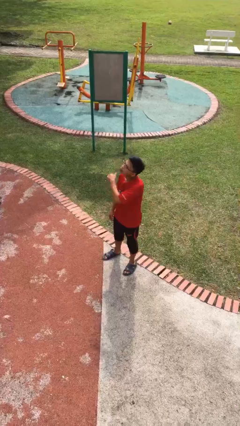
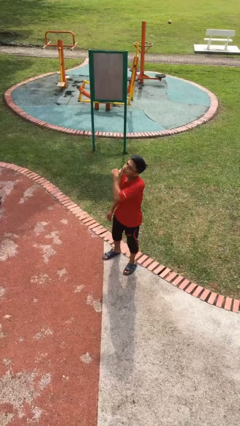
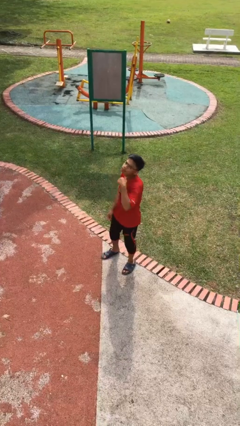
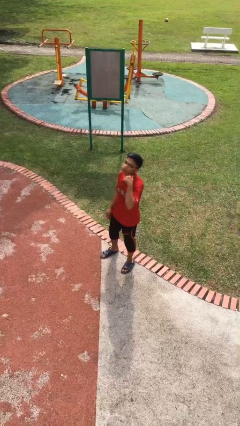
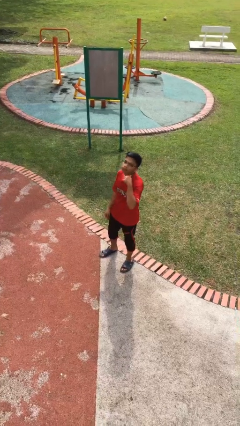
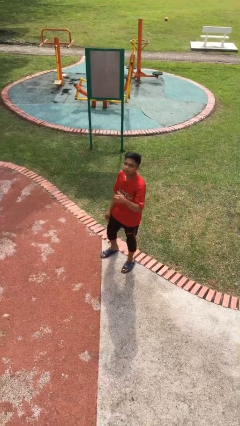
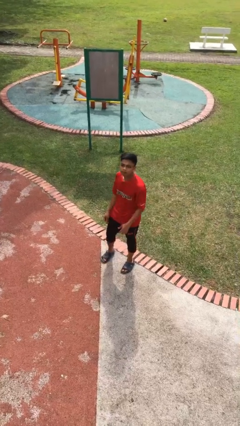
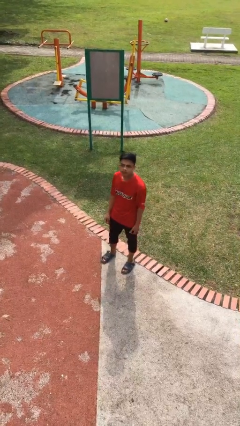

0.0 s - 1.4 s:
person gestures cut

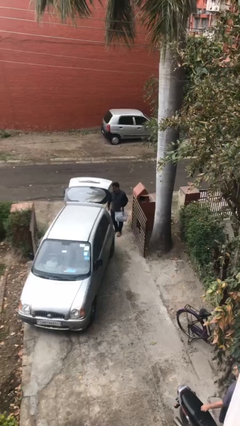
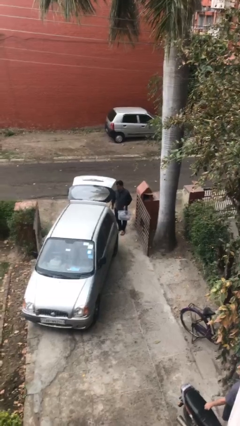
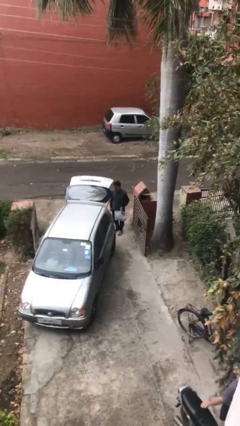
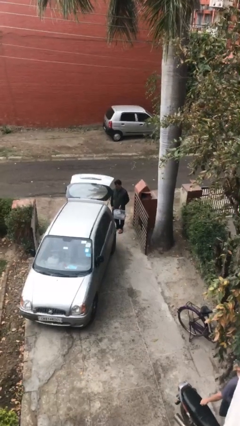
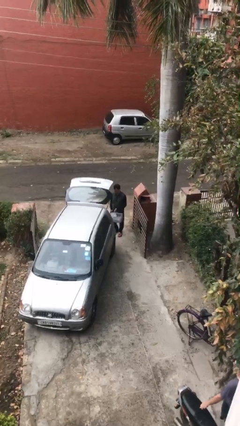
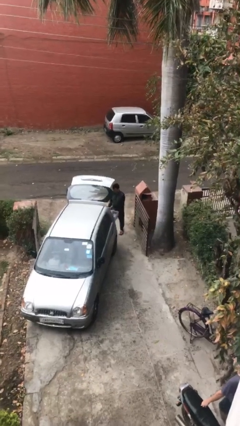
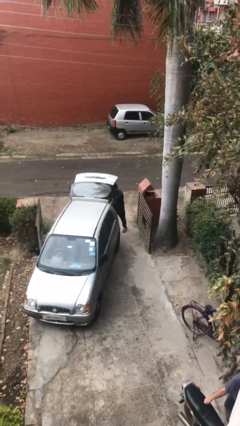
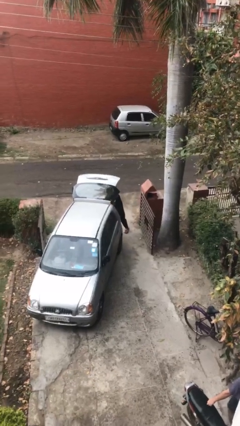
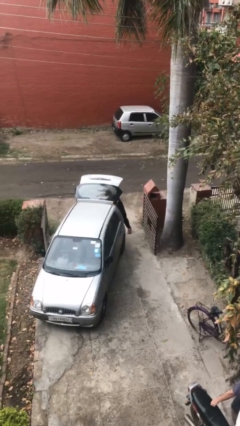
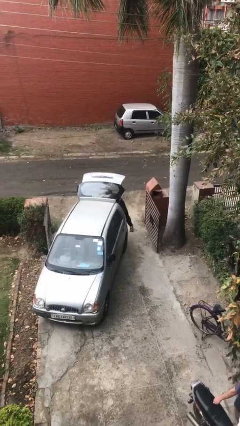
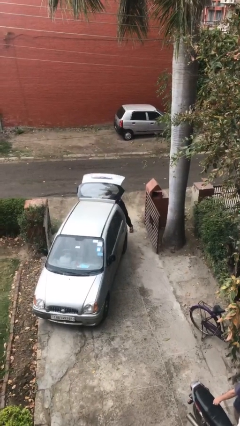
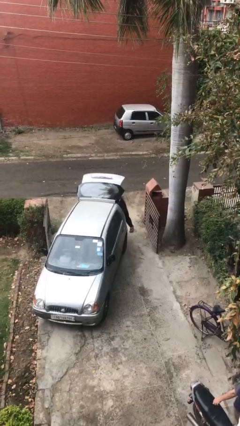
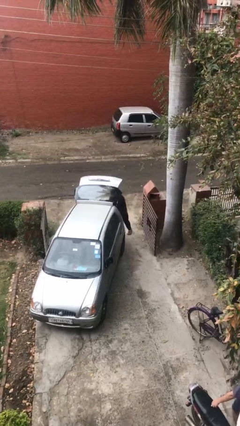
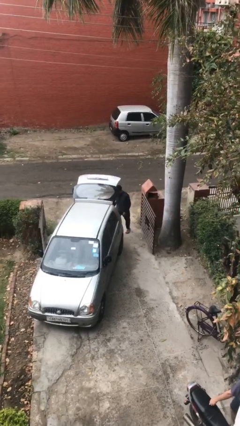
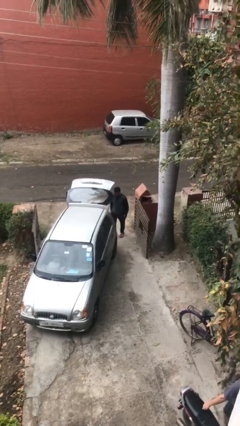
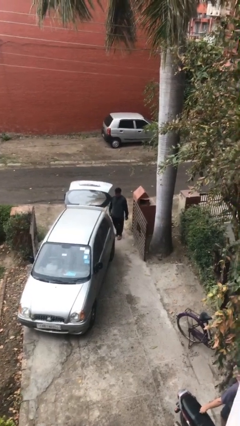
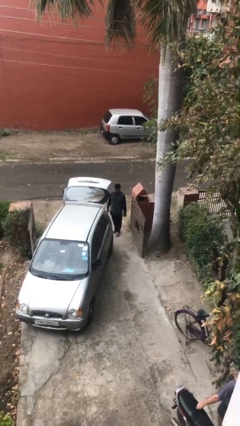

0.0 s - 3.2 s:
person loads car

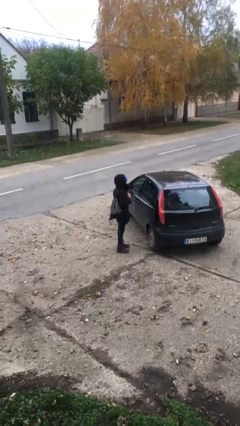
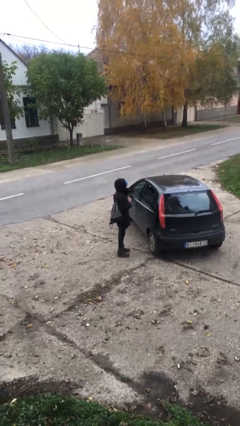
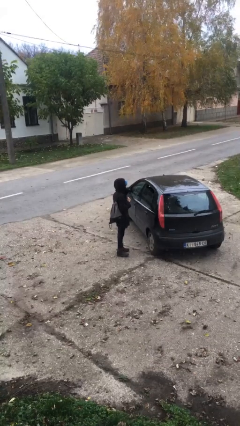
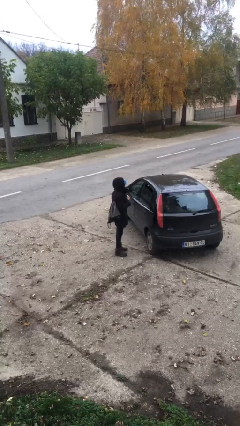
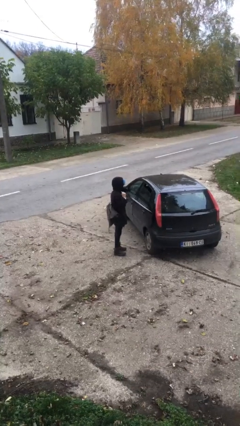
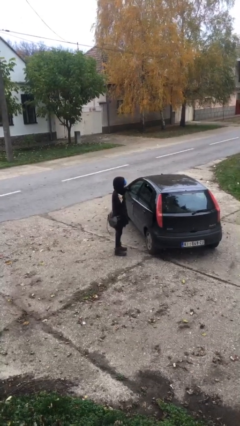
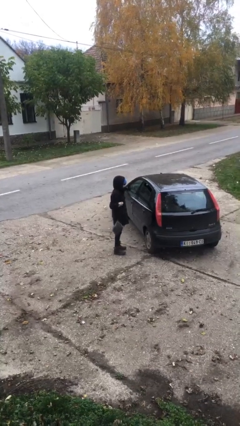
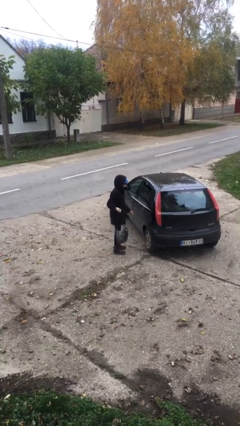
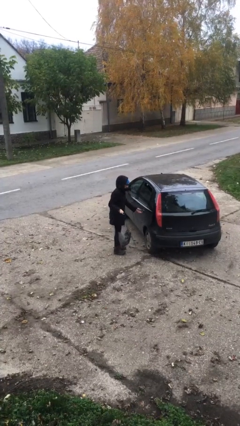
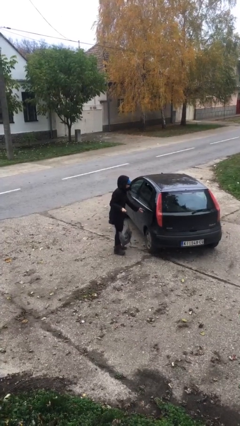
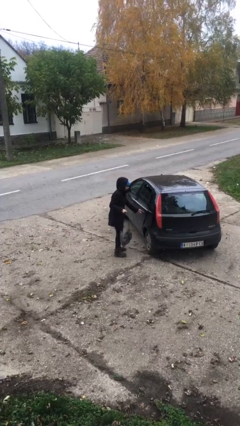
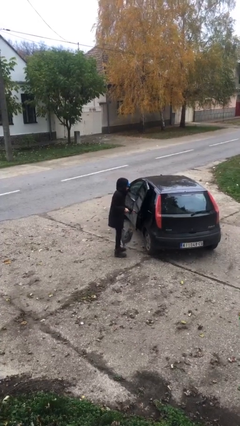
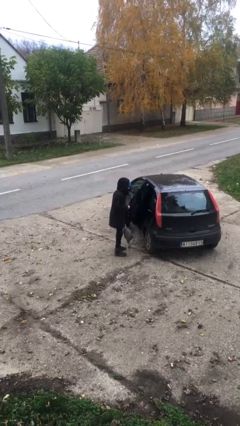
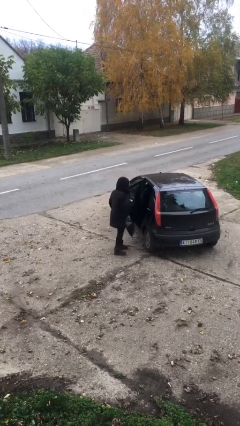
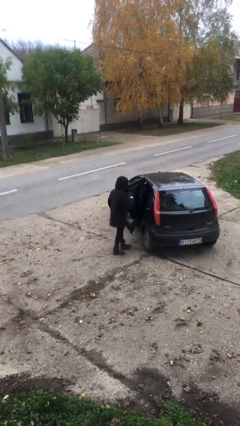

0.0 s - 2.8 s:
person opens car door

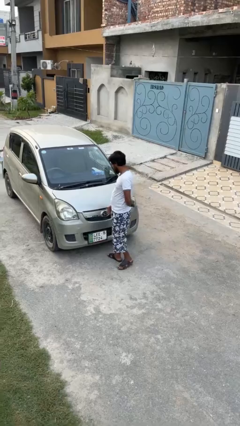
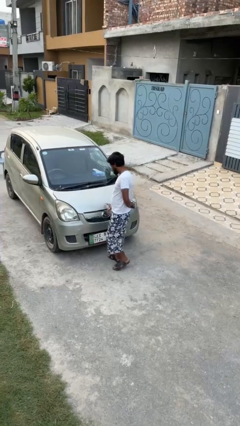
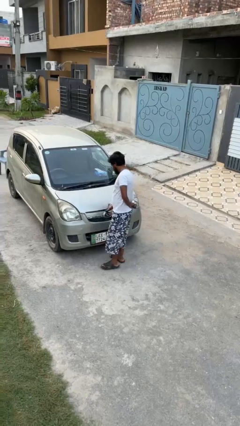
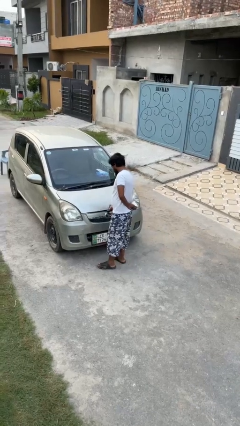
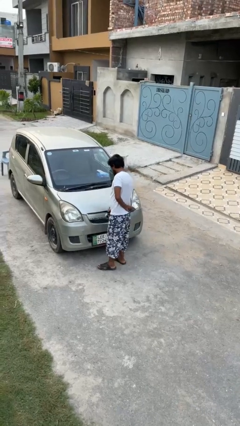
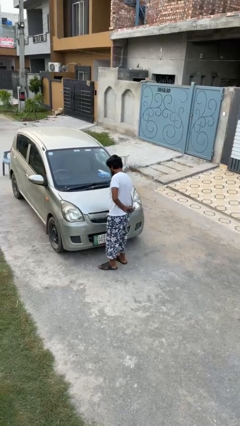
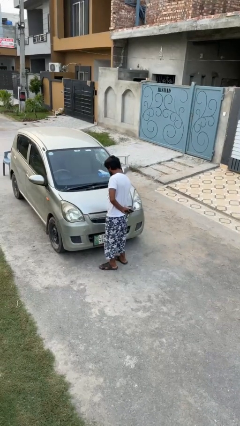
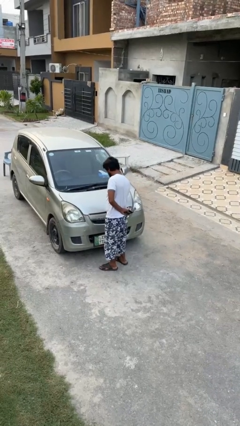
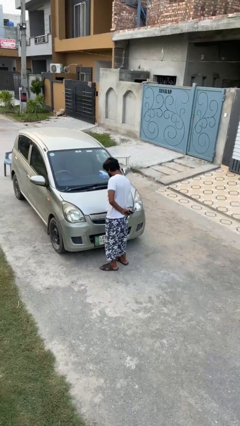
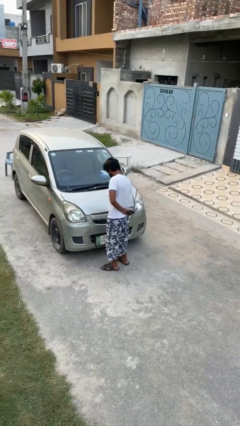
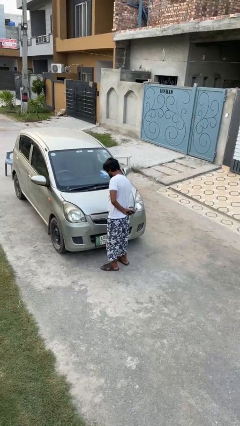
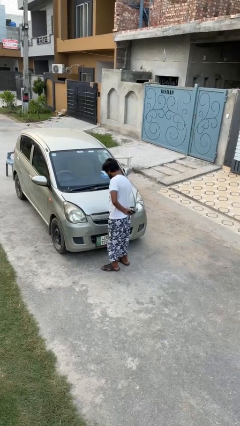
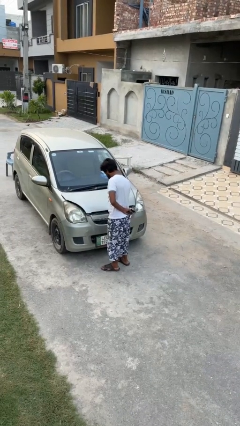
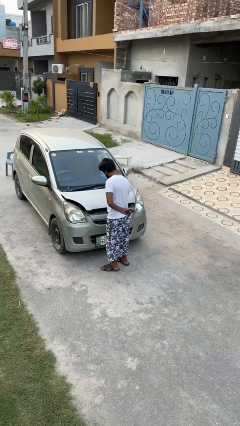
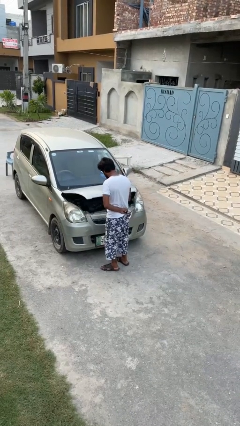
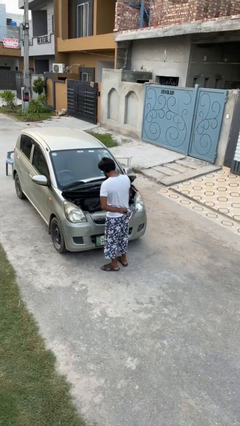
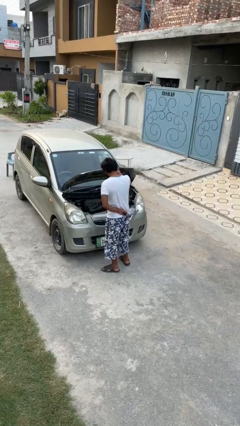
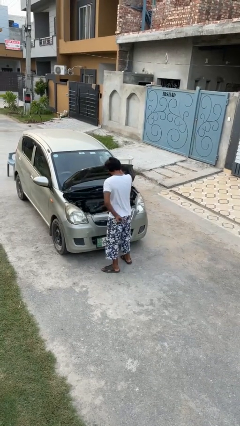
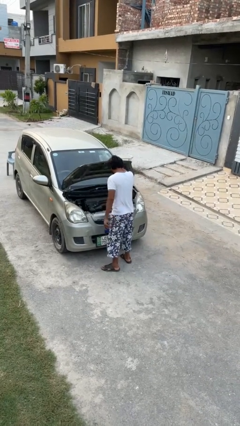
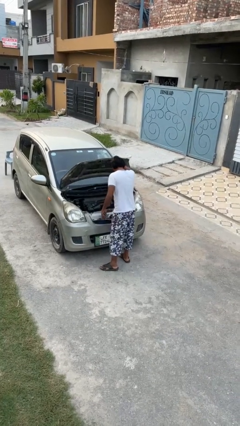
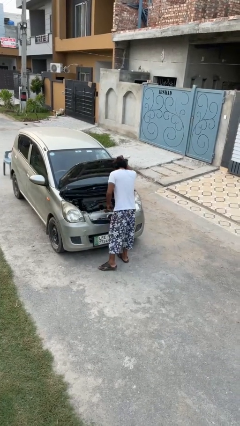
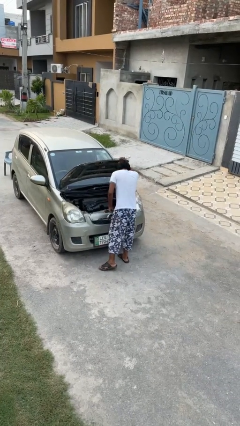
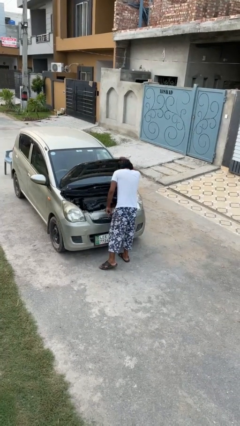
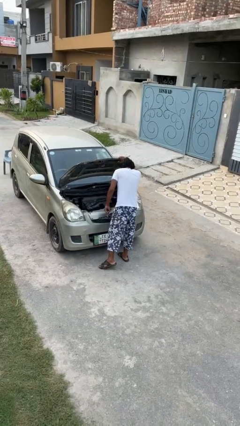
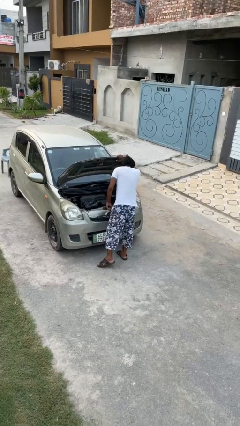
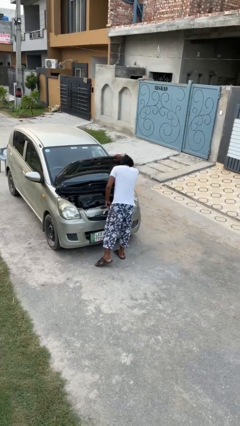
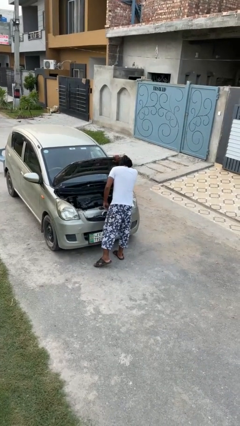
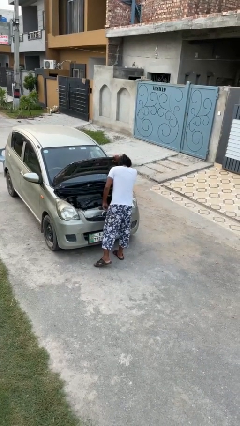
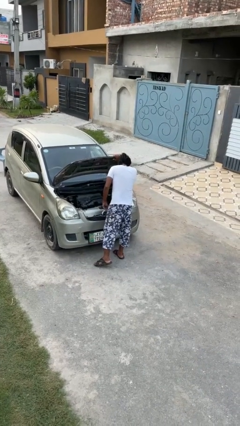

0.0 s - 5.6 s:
person opens car hood

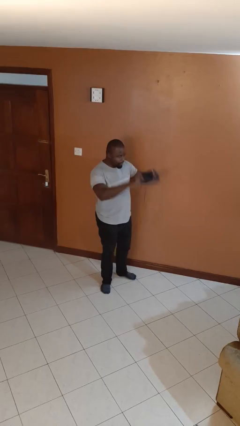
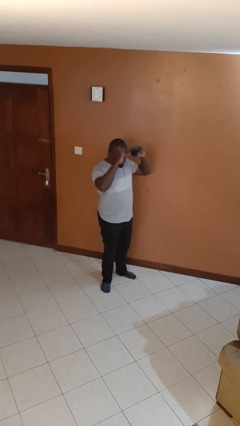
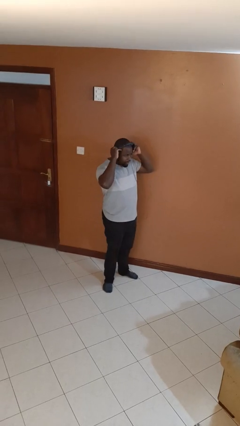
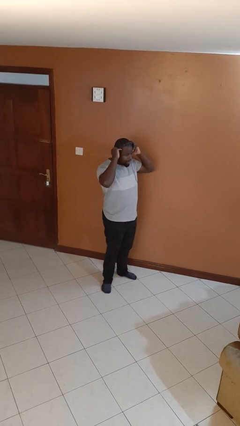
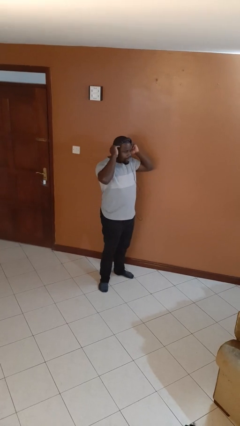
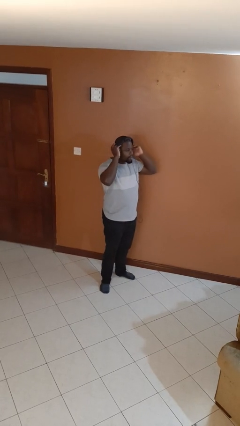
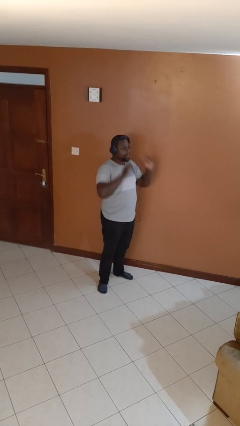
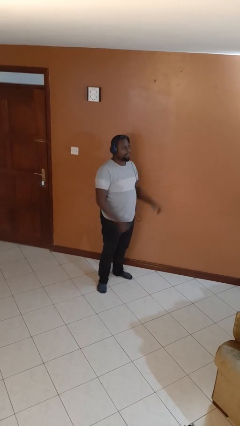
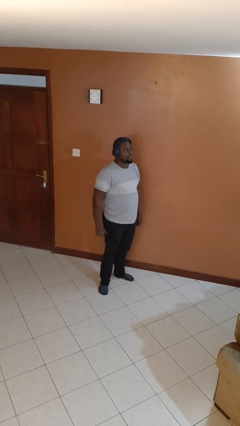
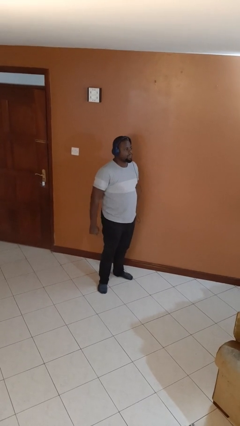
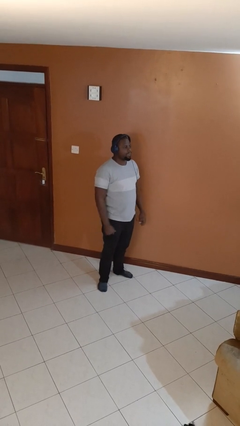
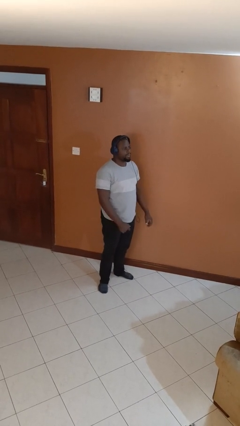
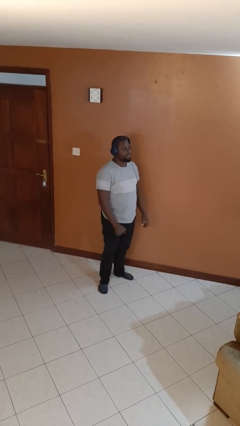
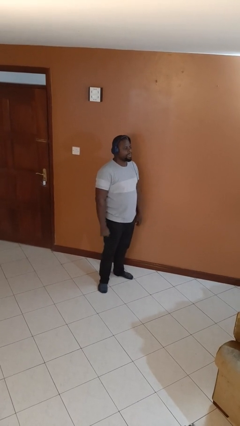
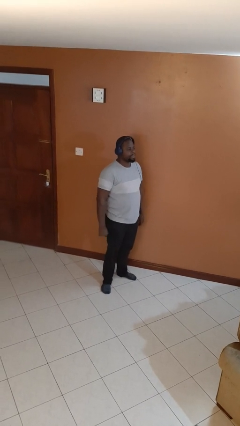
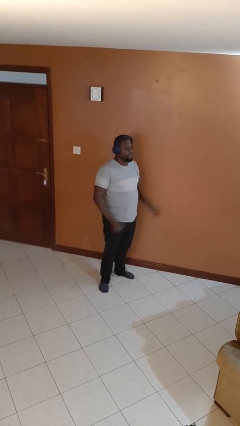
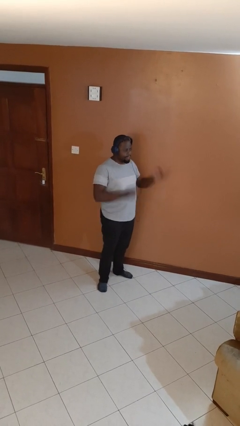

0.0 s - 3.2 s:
person puts on headphones

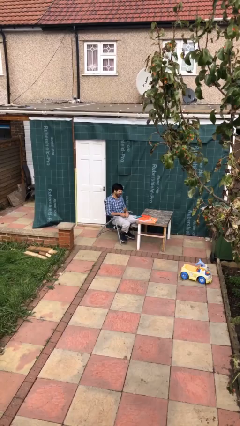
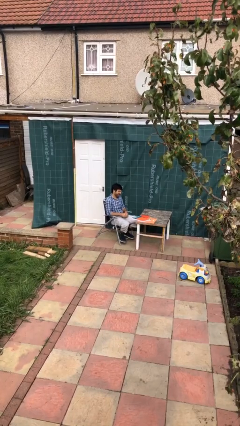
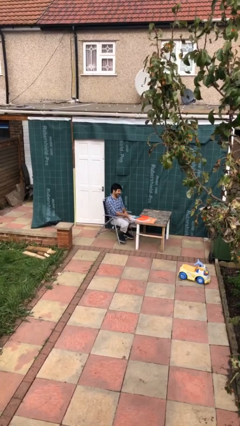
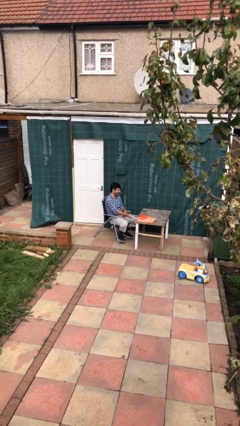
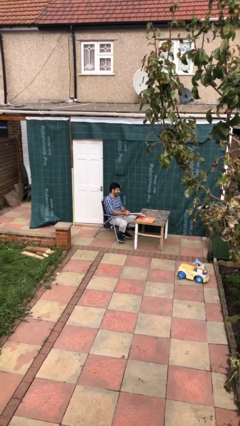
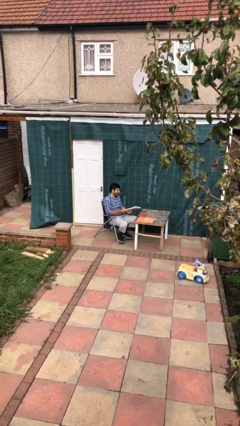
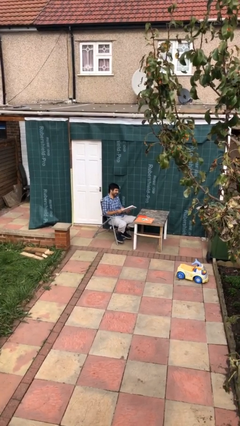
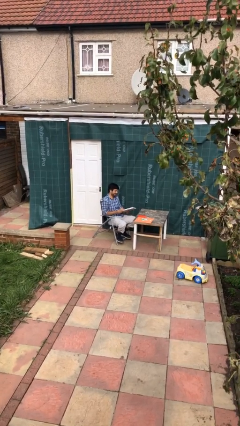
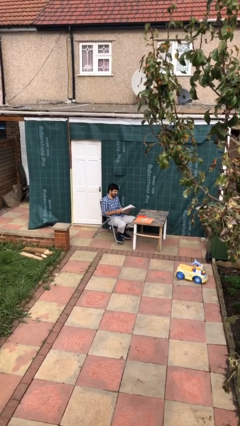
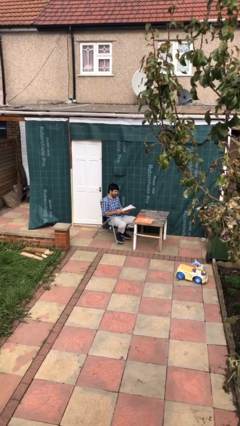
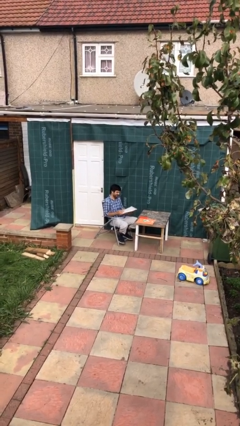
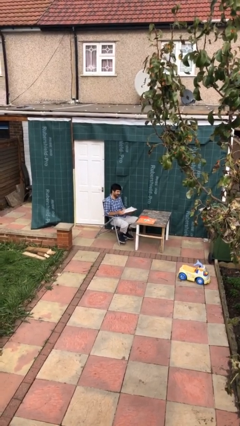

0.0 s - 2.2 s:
person picks up object from table
